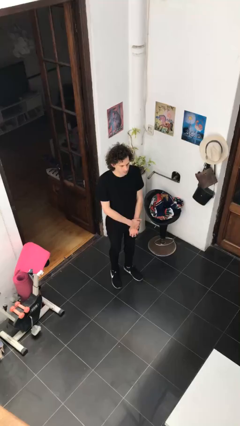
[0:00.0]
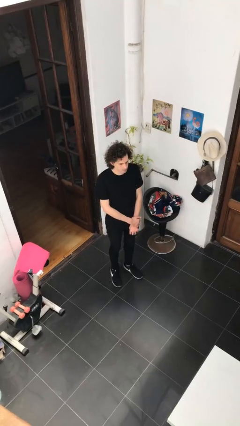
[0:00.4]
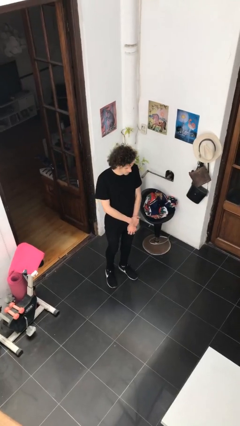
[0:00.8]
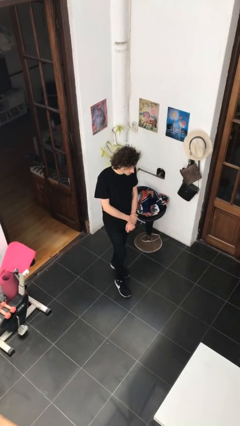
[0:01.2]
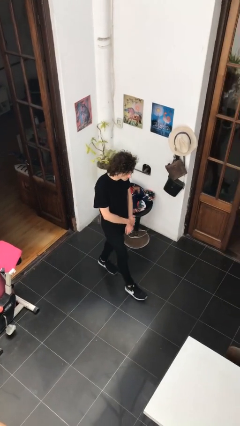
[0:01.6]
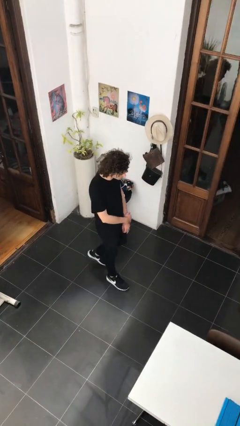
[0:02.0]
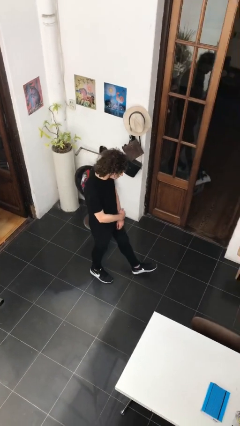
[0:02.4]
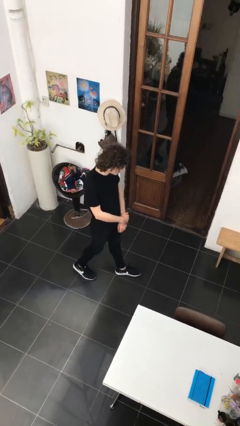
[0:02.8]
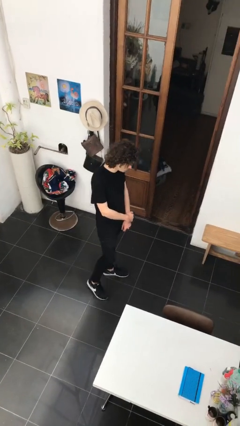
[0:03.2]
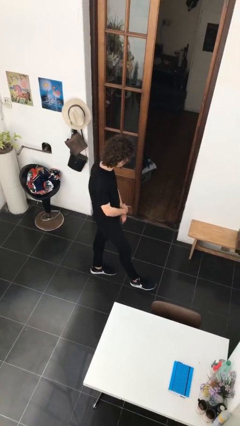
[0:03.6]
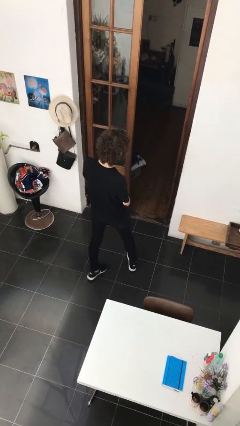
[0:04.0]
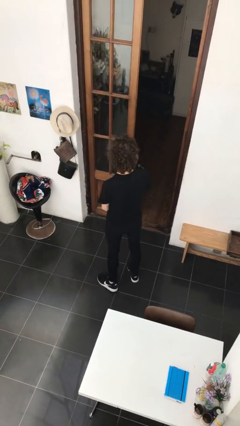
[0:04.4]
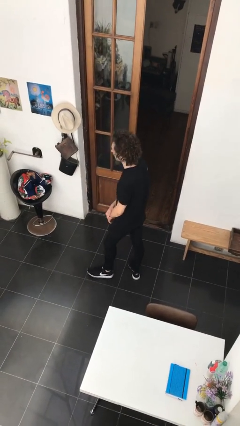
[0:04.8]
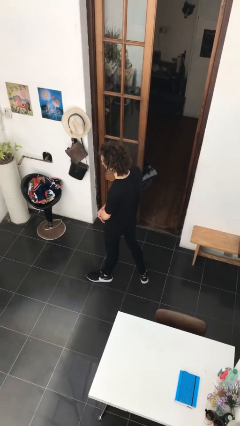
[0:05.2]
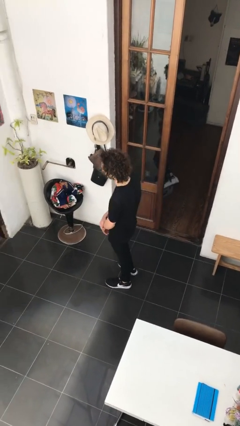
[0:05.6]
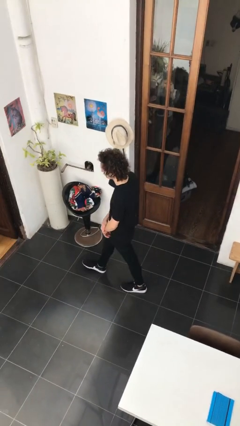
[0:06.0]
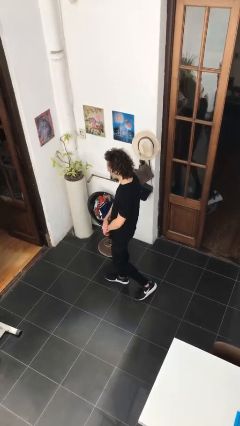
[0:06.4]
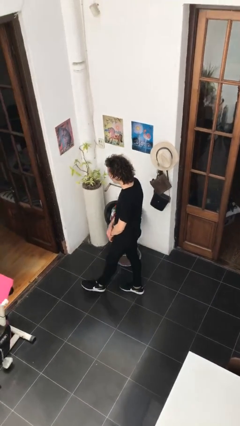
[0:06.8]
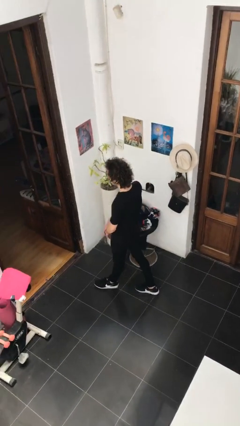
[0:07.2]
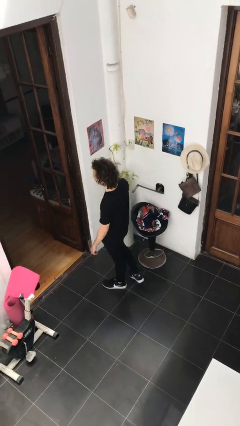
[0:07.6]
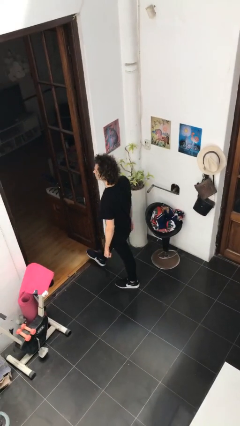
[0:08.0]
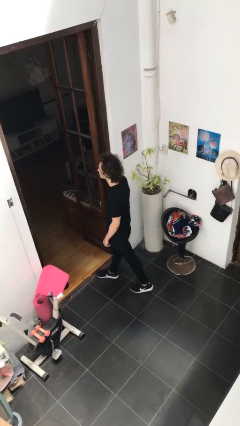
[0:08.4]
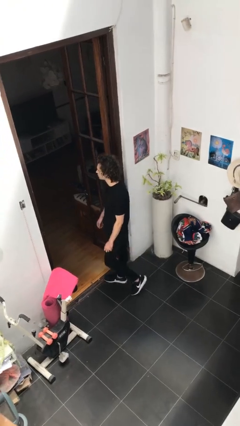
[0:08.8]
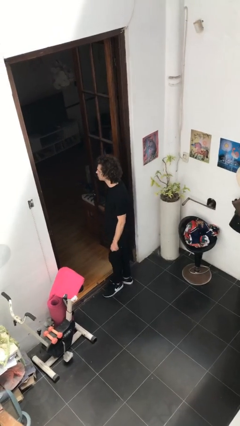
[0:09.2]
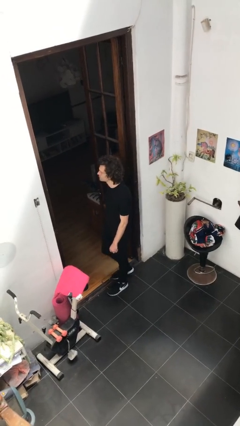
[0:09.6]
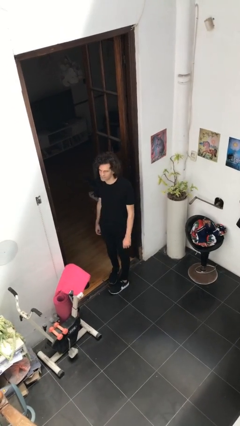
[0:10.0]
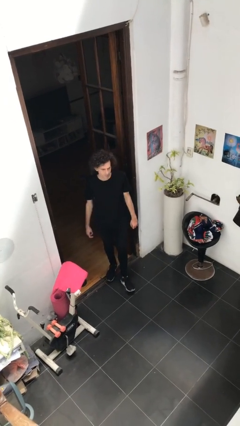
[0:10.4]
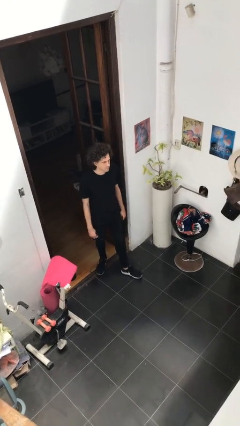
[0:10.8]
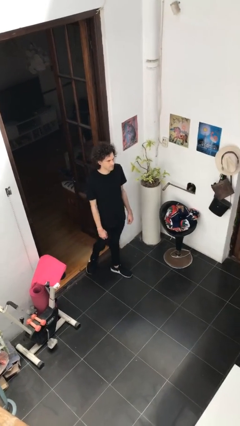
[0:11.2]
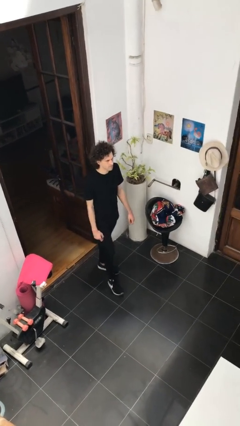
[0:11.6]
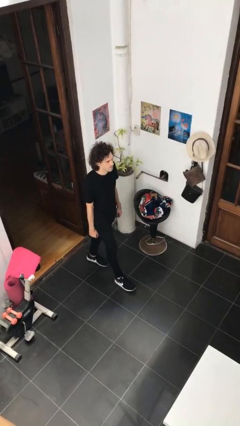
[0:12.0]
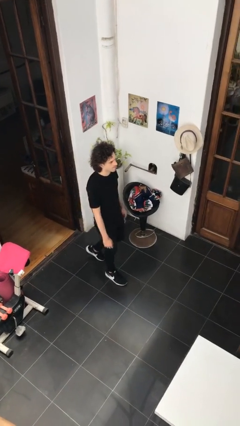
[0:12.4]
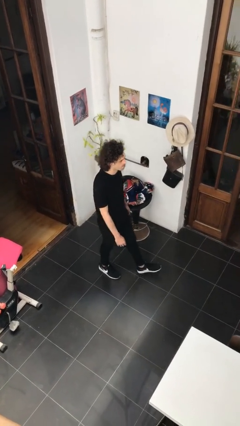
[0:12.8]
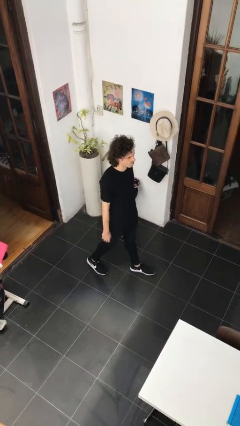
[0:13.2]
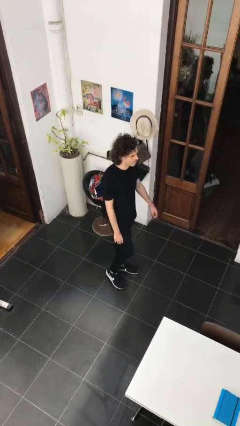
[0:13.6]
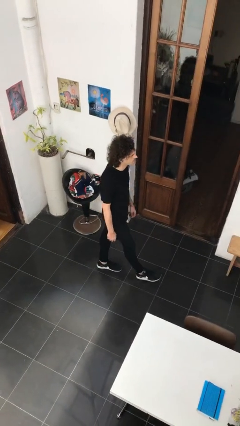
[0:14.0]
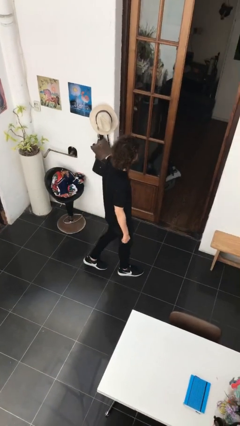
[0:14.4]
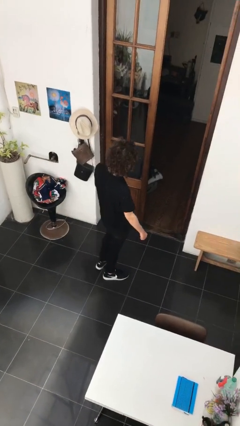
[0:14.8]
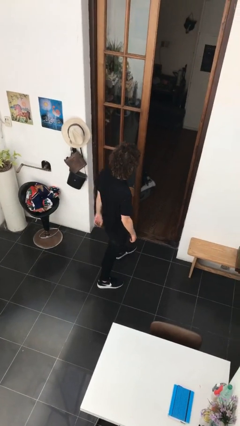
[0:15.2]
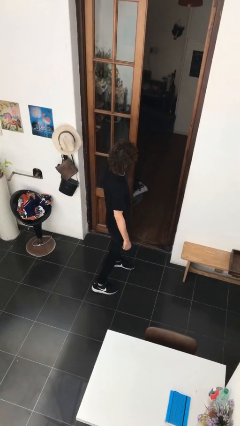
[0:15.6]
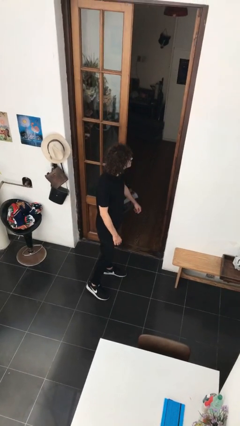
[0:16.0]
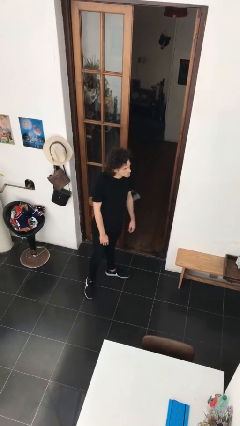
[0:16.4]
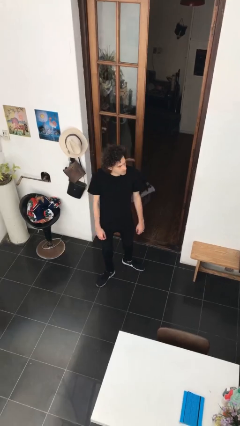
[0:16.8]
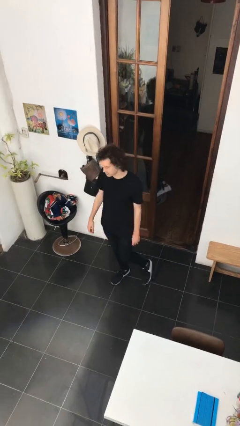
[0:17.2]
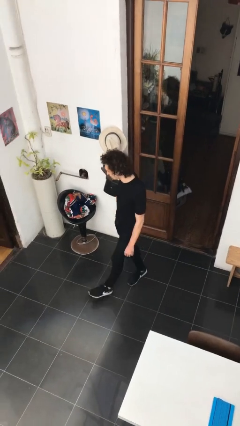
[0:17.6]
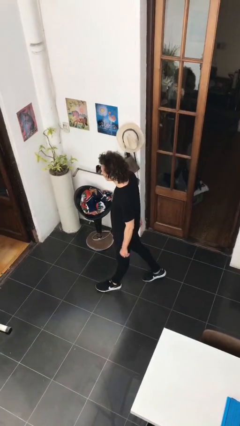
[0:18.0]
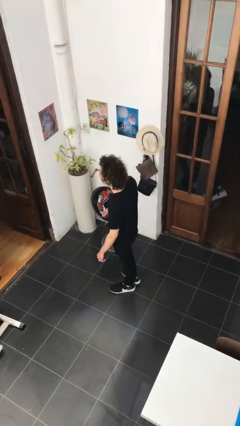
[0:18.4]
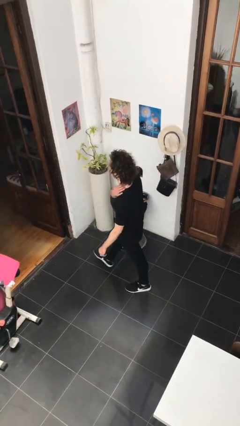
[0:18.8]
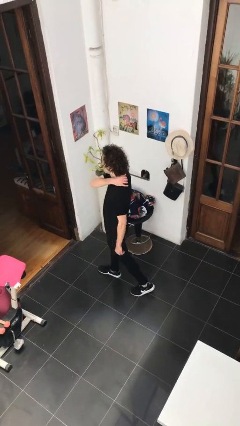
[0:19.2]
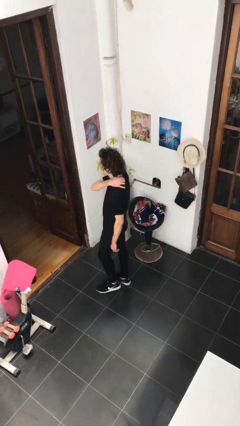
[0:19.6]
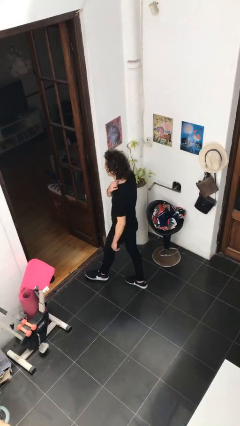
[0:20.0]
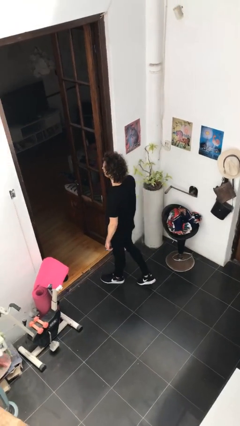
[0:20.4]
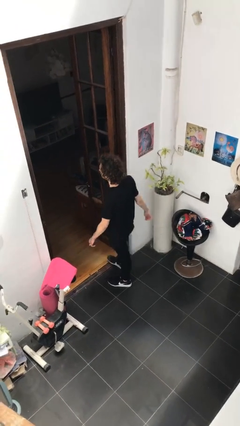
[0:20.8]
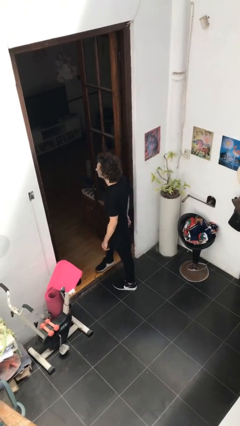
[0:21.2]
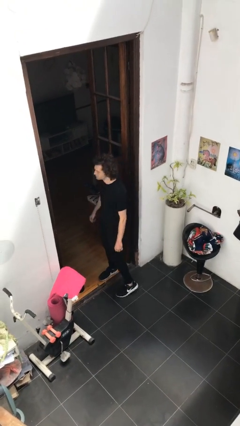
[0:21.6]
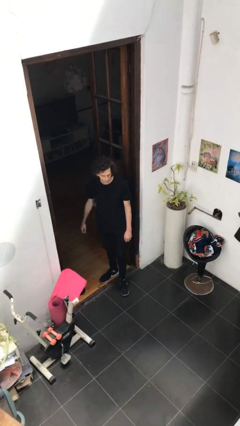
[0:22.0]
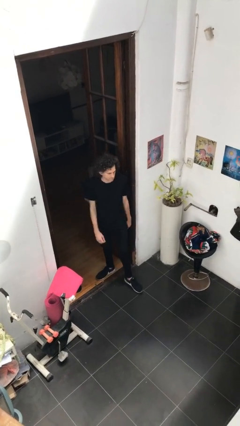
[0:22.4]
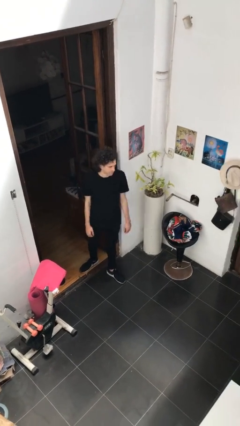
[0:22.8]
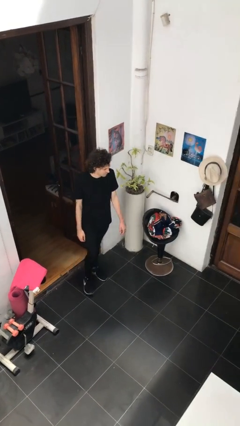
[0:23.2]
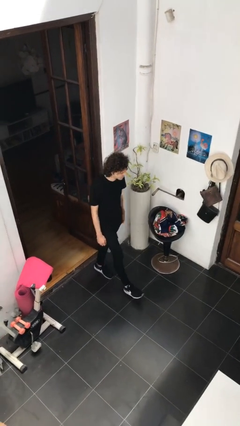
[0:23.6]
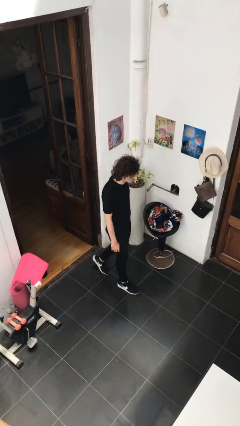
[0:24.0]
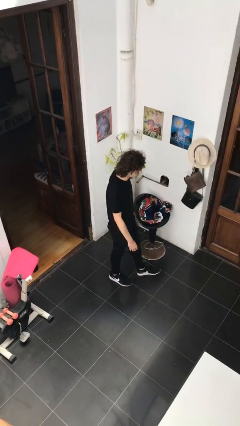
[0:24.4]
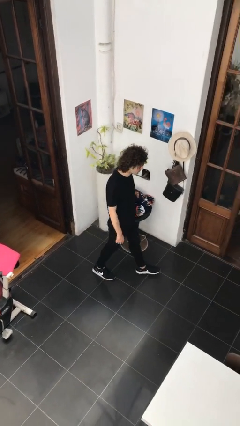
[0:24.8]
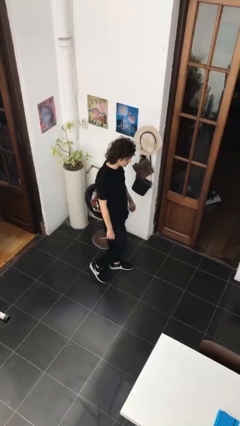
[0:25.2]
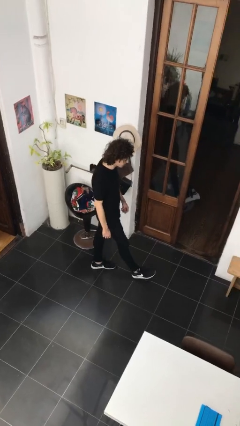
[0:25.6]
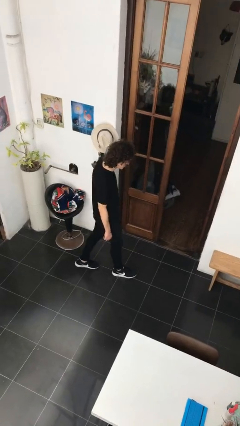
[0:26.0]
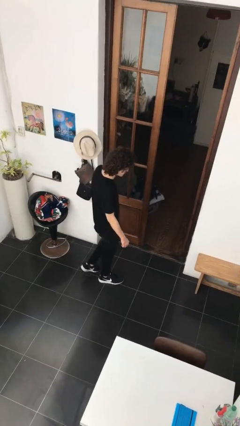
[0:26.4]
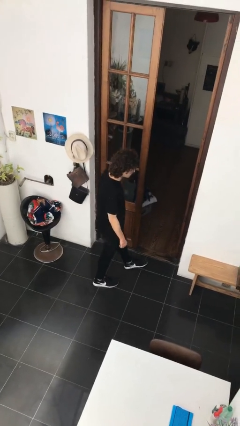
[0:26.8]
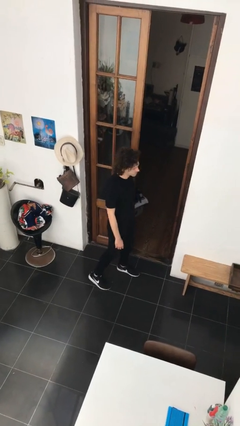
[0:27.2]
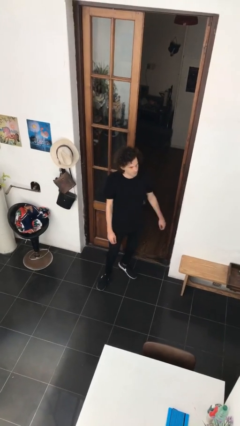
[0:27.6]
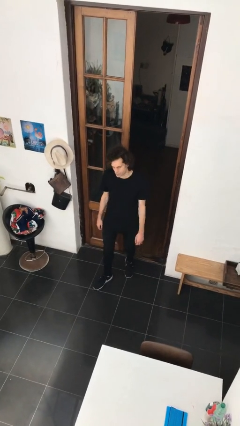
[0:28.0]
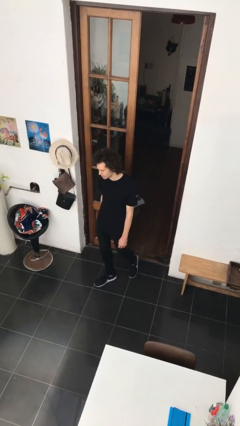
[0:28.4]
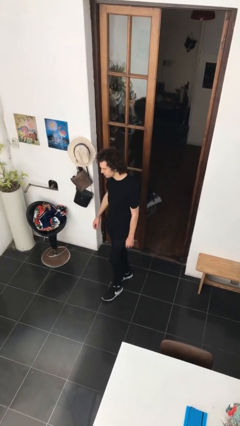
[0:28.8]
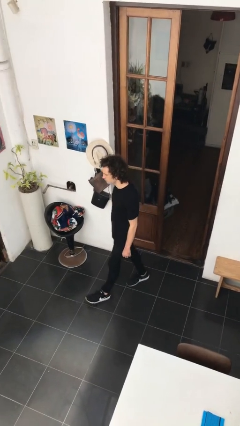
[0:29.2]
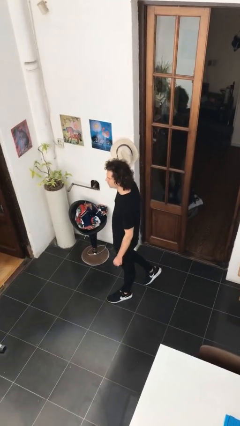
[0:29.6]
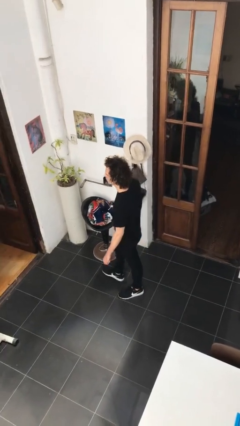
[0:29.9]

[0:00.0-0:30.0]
person walks

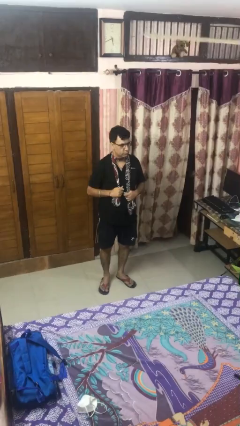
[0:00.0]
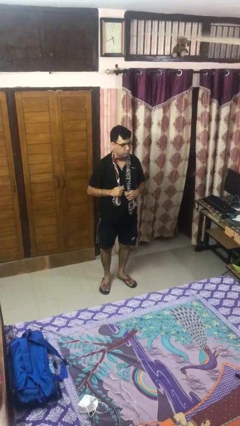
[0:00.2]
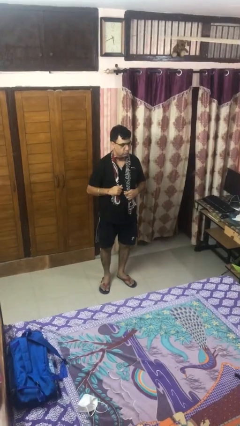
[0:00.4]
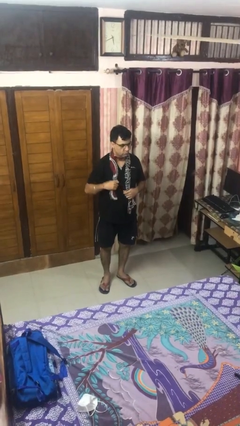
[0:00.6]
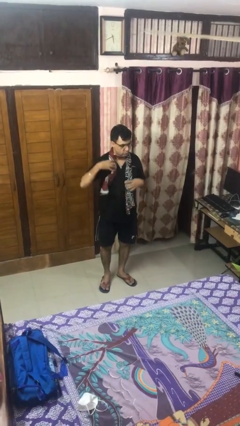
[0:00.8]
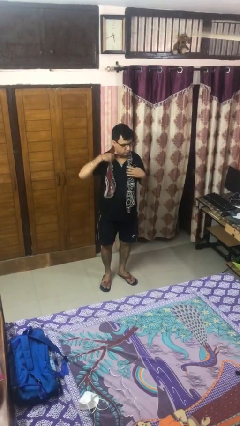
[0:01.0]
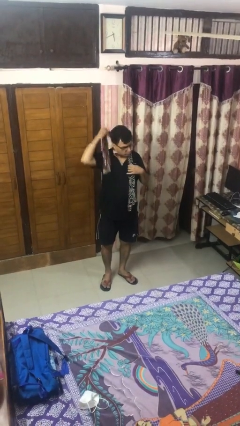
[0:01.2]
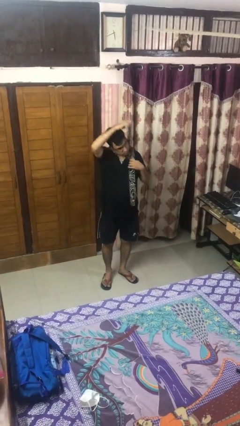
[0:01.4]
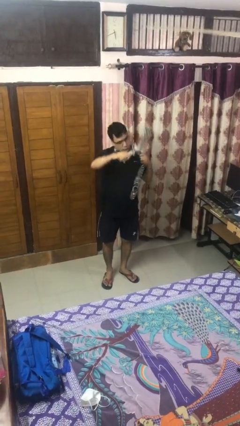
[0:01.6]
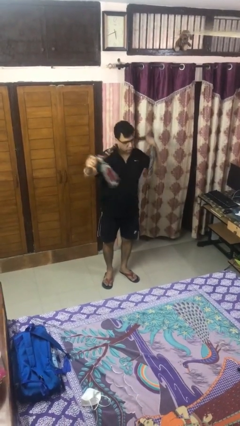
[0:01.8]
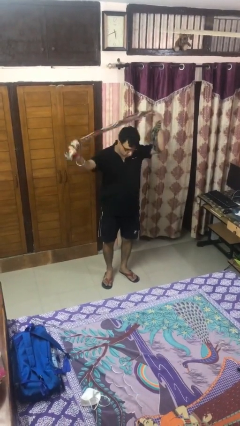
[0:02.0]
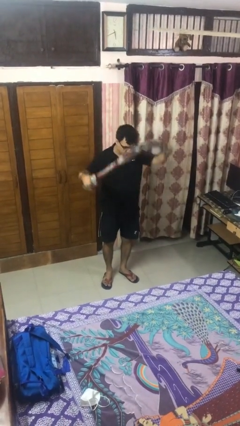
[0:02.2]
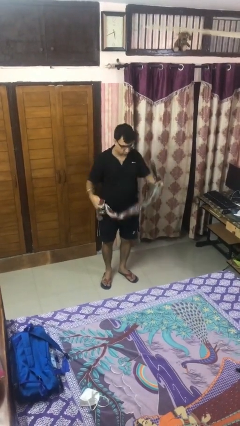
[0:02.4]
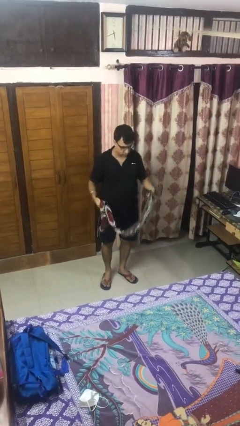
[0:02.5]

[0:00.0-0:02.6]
person takes off scarf

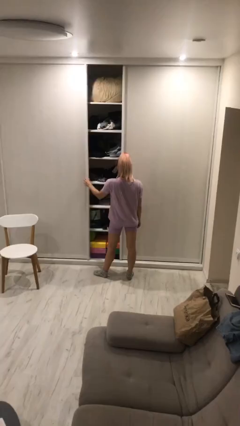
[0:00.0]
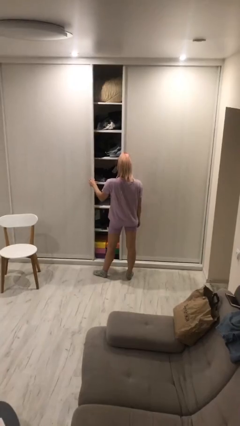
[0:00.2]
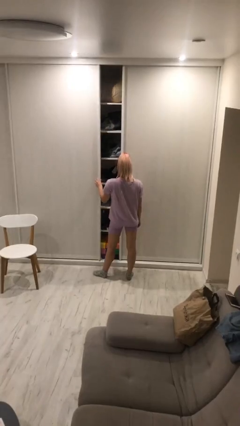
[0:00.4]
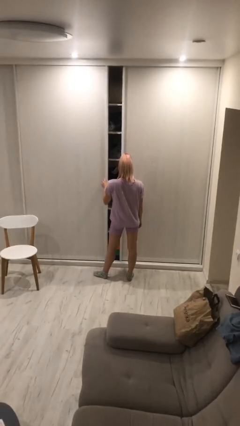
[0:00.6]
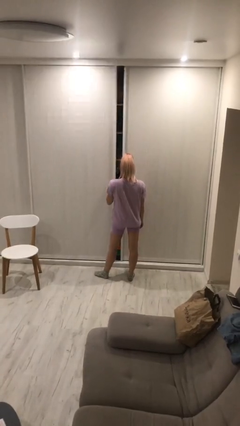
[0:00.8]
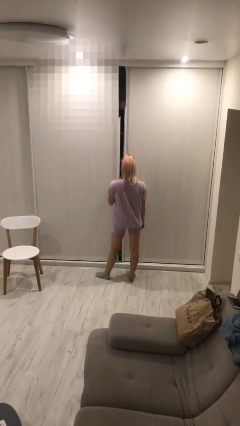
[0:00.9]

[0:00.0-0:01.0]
person closes sliding door
